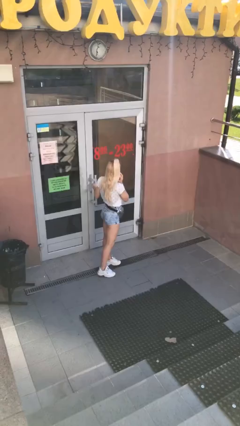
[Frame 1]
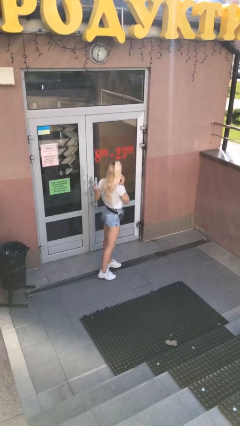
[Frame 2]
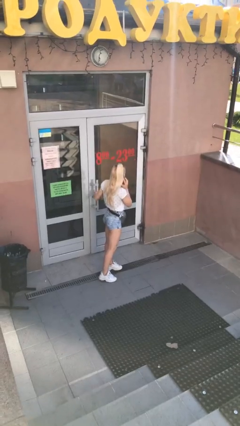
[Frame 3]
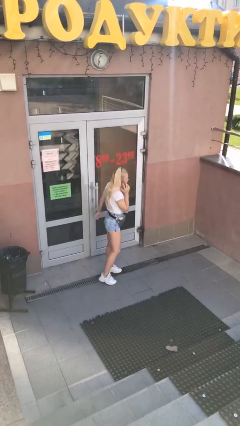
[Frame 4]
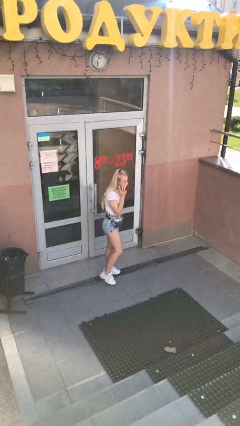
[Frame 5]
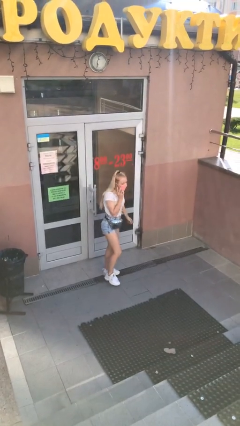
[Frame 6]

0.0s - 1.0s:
person closes facility door

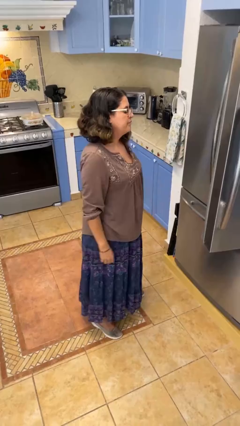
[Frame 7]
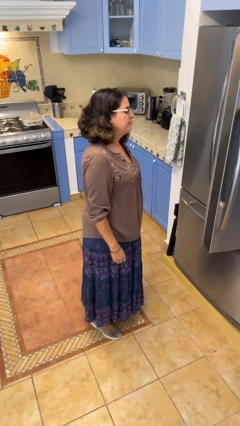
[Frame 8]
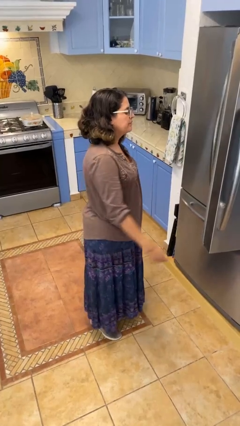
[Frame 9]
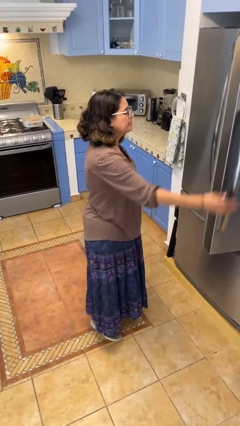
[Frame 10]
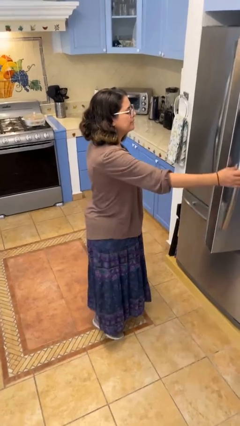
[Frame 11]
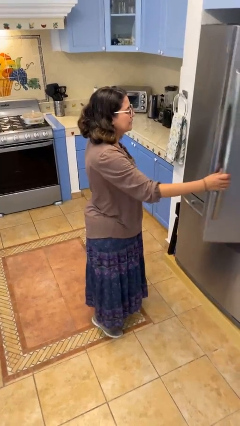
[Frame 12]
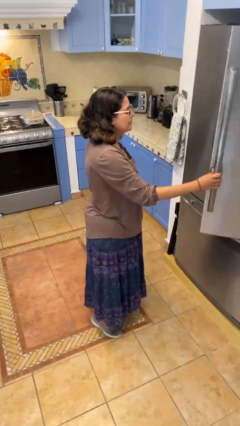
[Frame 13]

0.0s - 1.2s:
person closes refrigerator

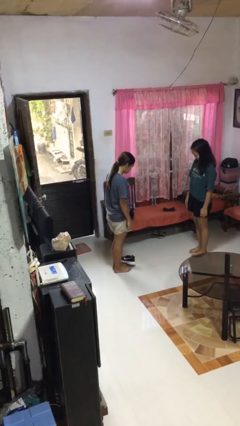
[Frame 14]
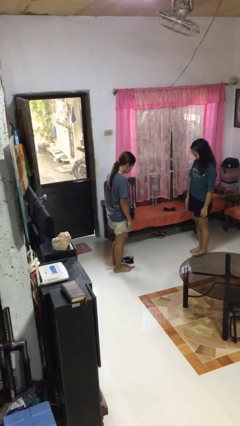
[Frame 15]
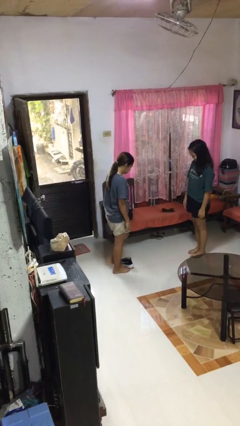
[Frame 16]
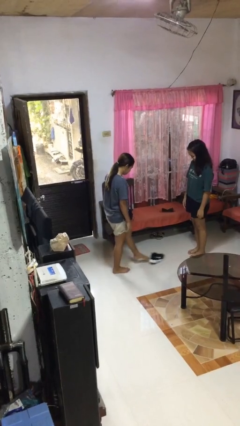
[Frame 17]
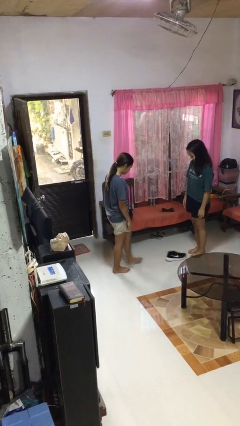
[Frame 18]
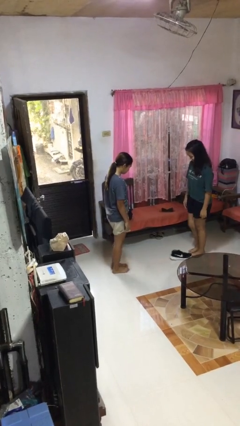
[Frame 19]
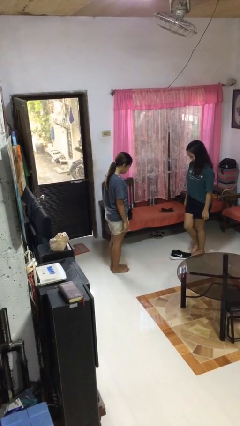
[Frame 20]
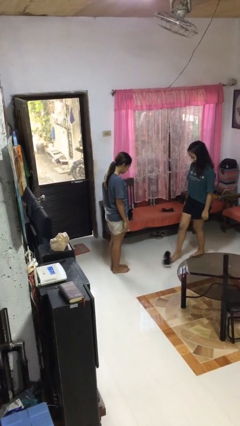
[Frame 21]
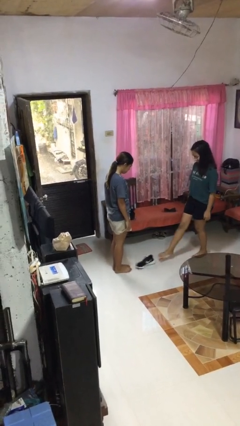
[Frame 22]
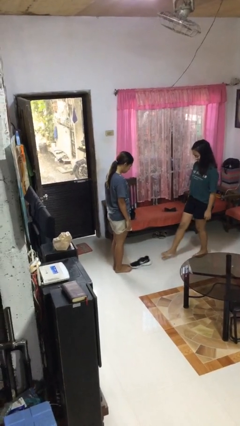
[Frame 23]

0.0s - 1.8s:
person kicks object to person

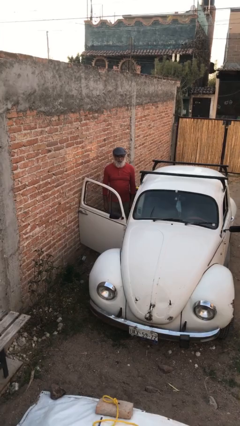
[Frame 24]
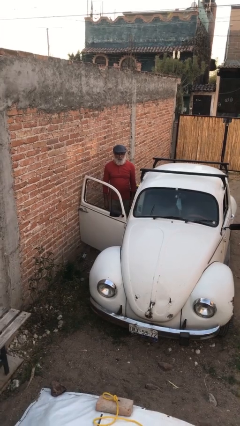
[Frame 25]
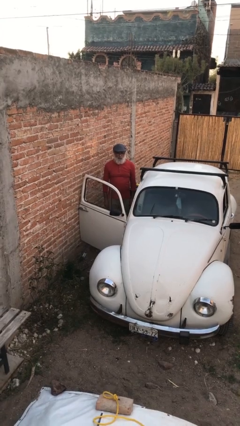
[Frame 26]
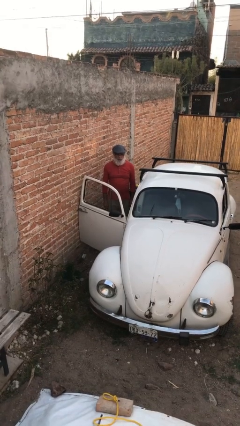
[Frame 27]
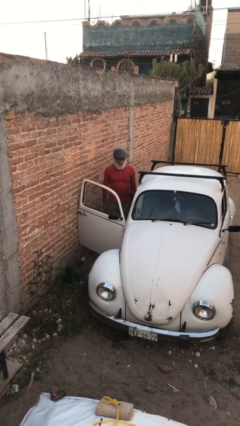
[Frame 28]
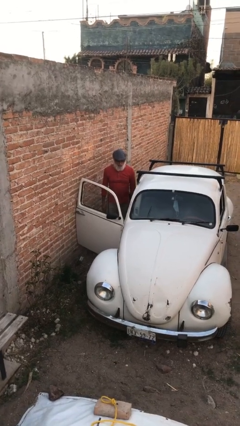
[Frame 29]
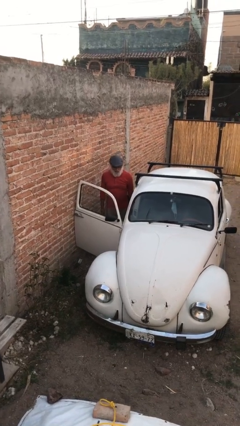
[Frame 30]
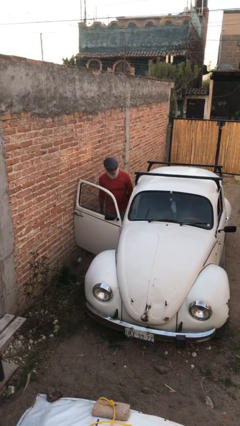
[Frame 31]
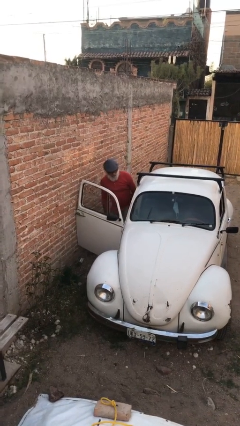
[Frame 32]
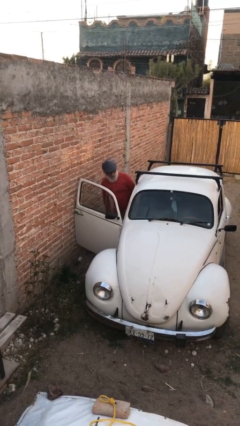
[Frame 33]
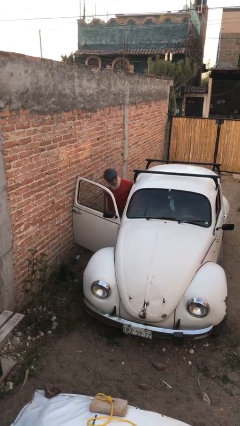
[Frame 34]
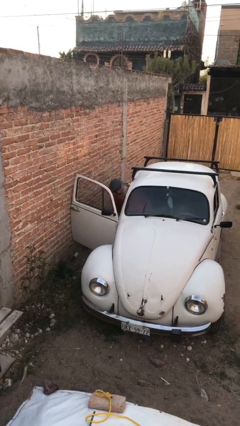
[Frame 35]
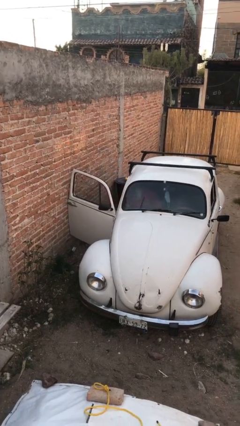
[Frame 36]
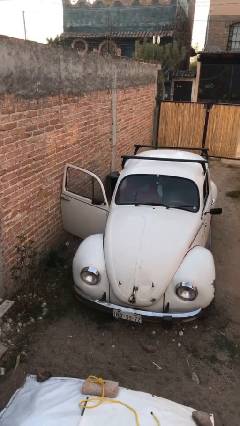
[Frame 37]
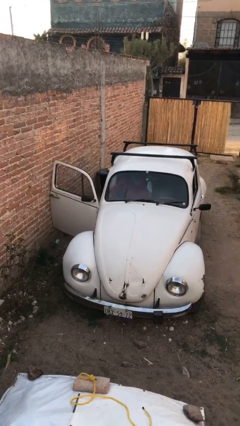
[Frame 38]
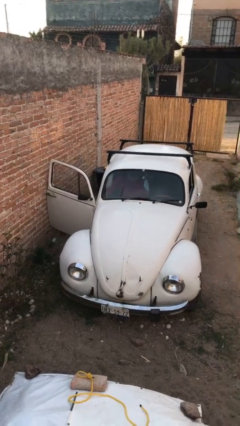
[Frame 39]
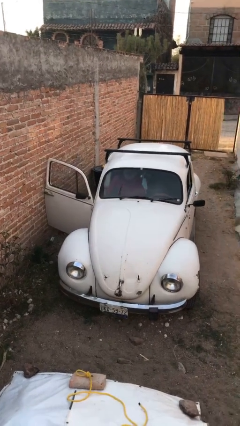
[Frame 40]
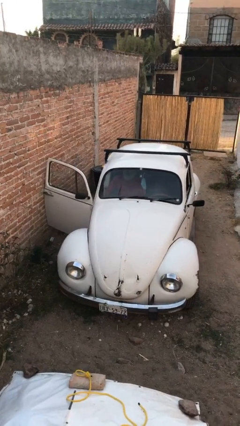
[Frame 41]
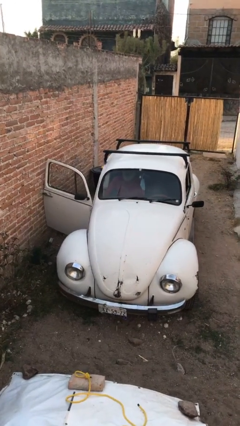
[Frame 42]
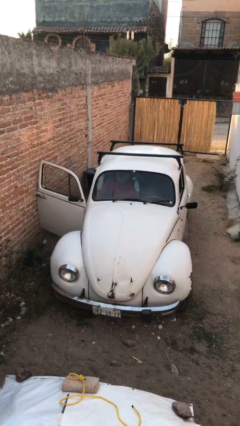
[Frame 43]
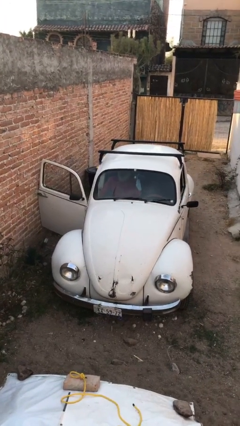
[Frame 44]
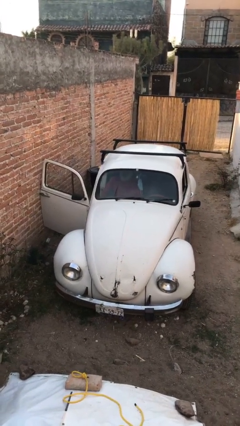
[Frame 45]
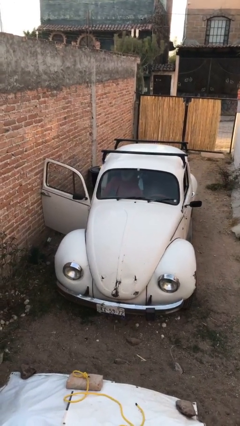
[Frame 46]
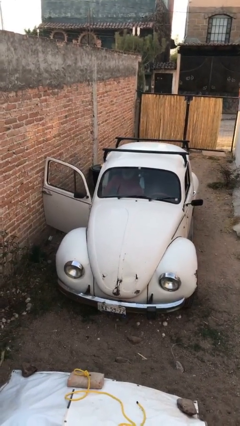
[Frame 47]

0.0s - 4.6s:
person enters car

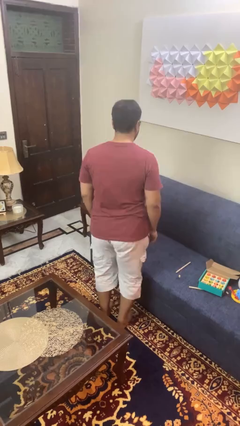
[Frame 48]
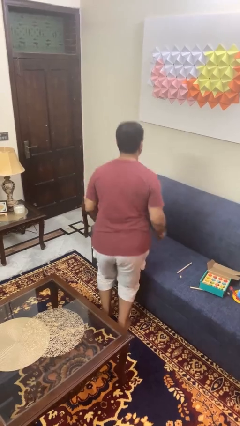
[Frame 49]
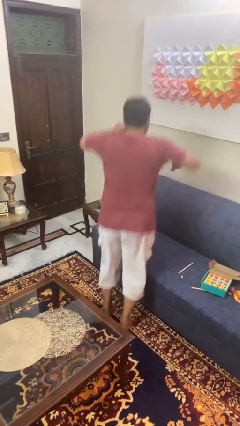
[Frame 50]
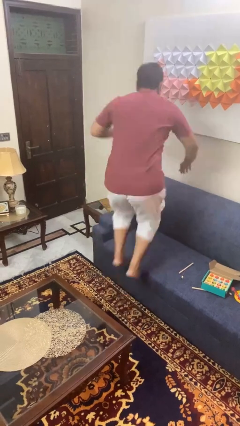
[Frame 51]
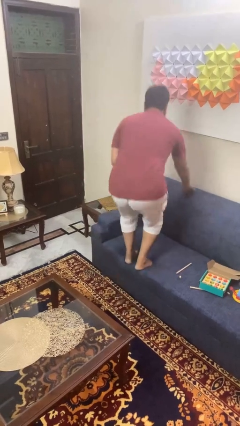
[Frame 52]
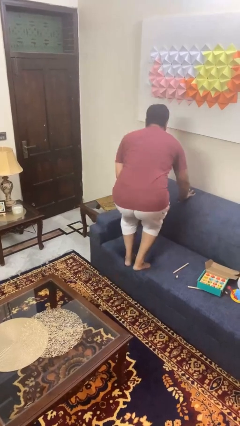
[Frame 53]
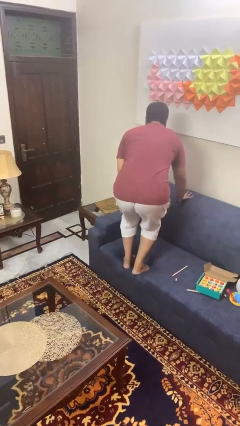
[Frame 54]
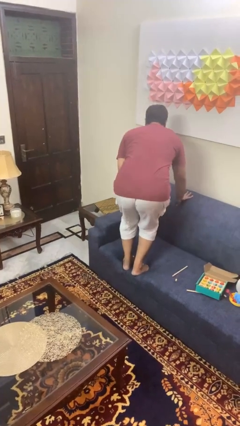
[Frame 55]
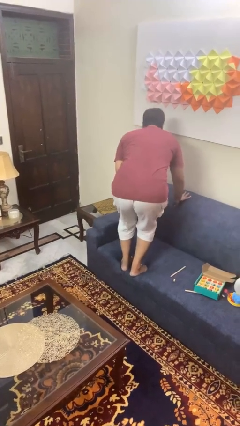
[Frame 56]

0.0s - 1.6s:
person jumps on couch

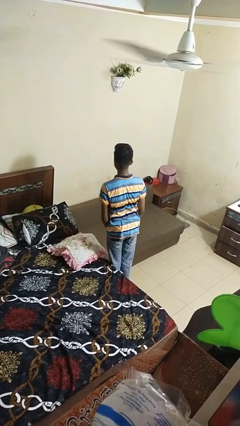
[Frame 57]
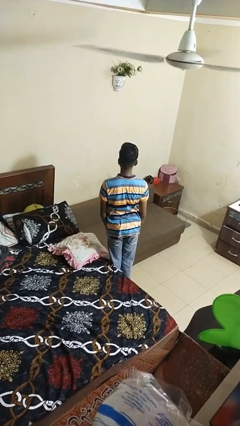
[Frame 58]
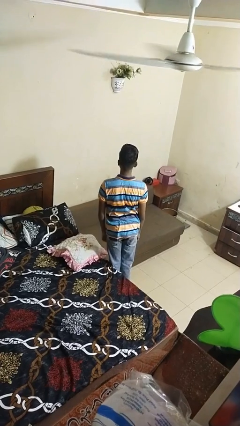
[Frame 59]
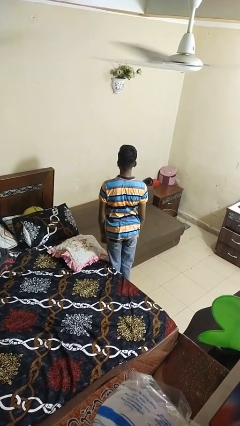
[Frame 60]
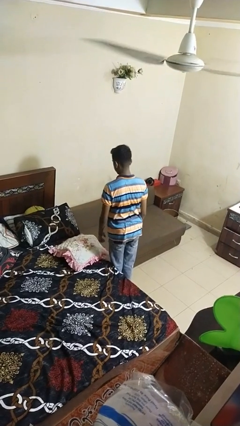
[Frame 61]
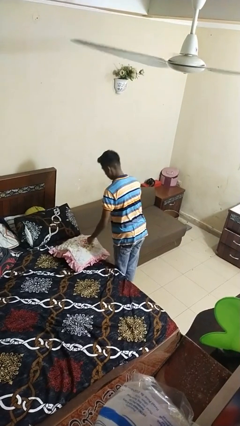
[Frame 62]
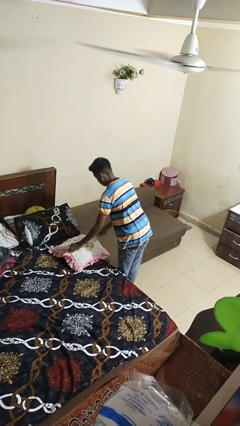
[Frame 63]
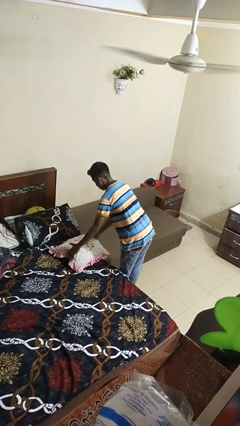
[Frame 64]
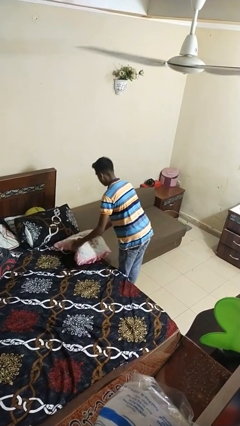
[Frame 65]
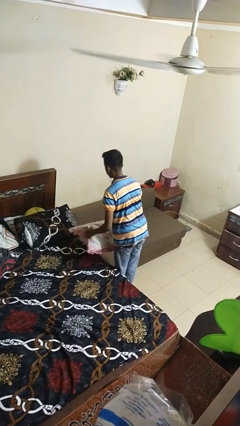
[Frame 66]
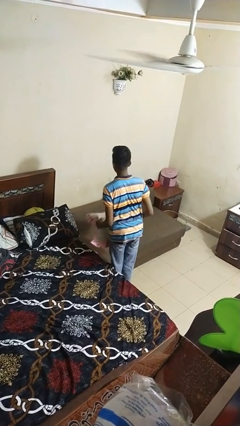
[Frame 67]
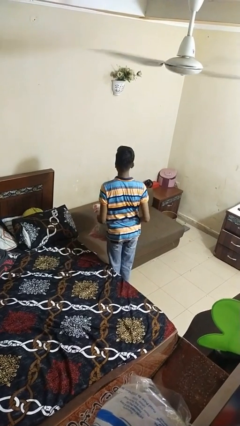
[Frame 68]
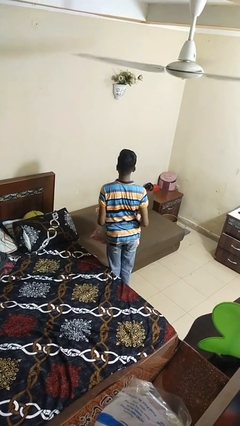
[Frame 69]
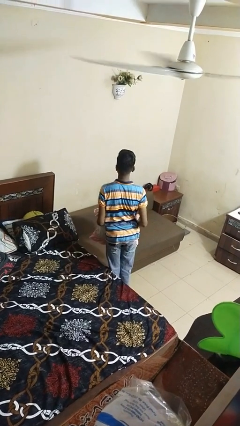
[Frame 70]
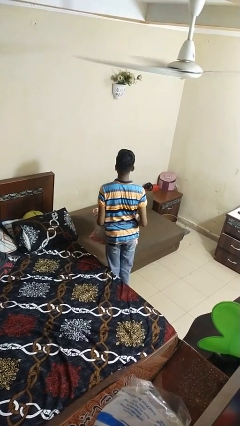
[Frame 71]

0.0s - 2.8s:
person picks up object from bed

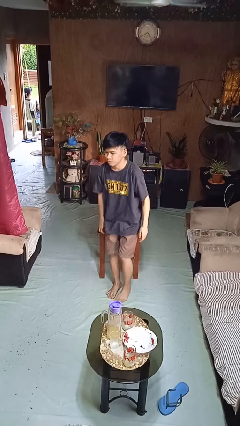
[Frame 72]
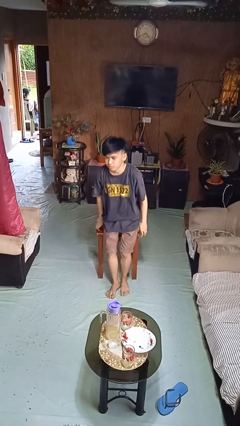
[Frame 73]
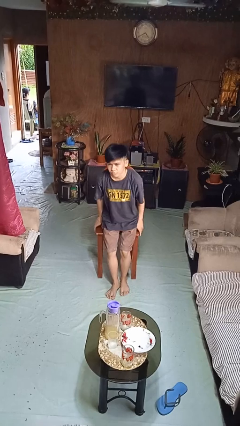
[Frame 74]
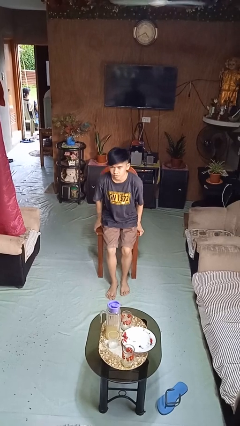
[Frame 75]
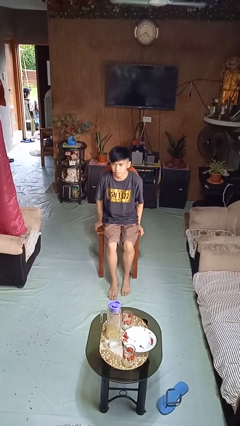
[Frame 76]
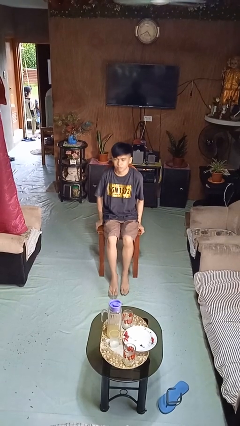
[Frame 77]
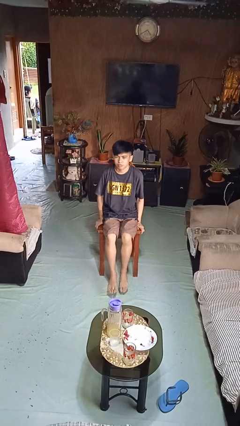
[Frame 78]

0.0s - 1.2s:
person sits down

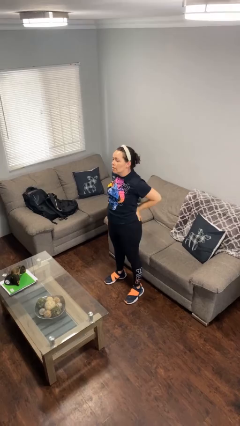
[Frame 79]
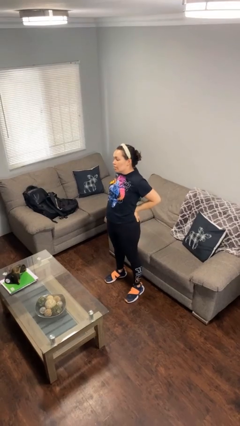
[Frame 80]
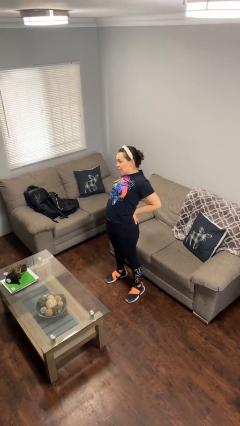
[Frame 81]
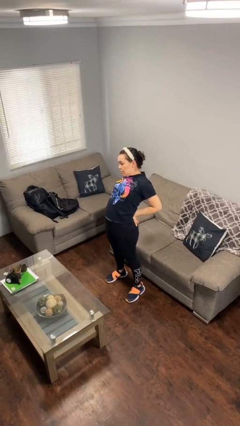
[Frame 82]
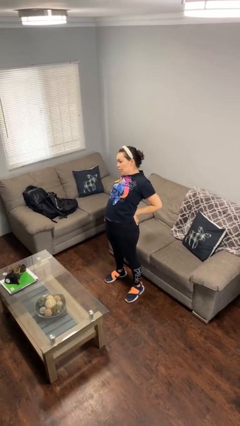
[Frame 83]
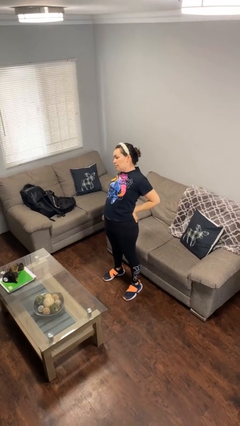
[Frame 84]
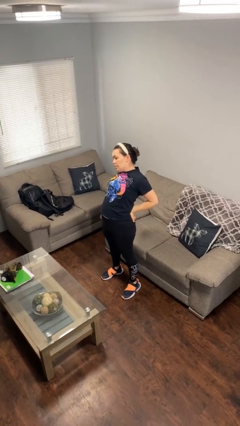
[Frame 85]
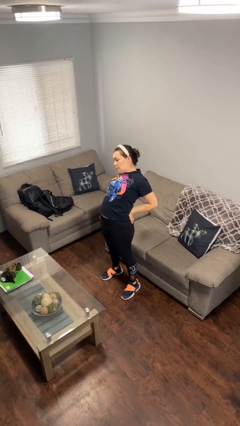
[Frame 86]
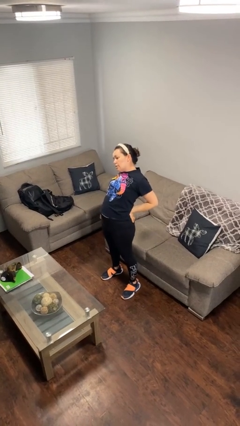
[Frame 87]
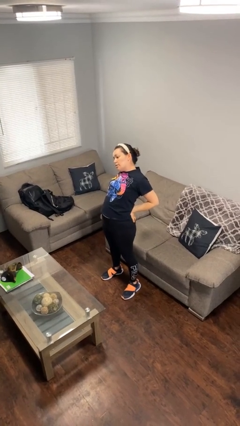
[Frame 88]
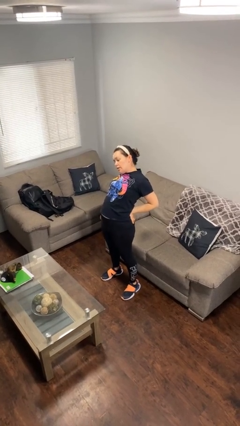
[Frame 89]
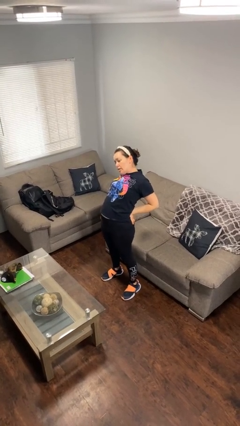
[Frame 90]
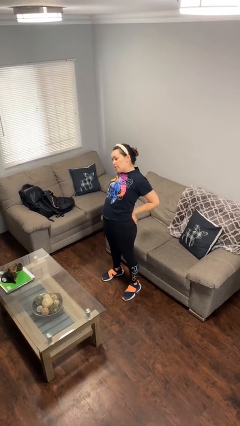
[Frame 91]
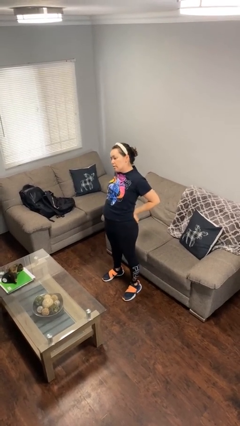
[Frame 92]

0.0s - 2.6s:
person stretches back
